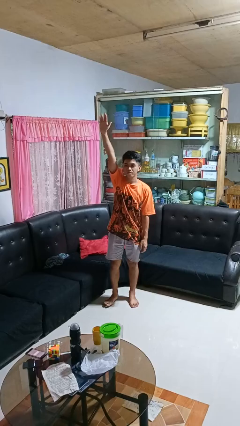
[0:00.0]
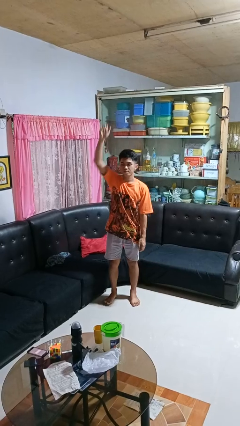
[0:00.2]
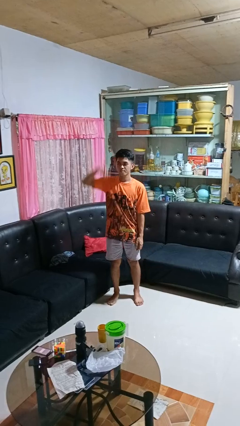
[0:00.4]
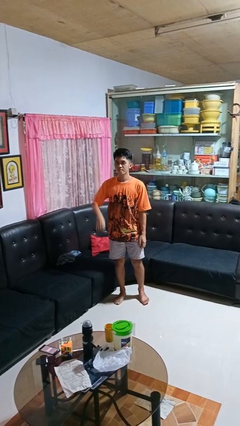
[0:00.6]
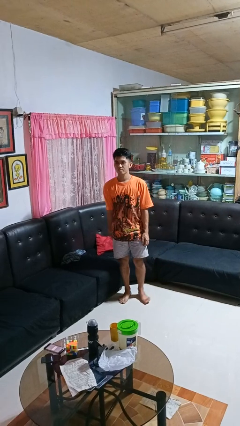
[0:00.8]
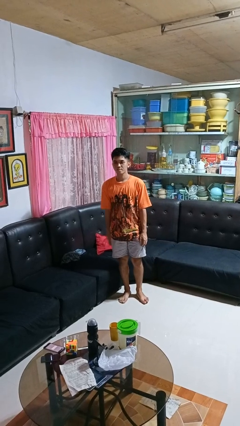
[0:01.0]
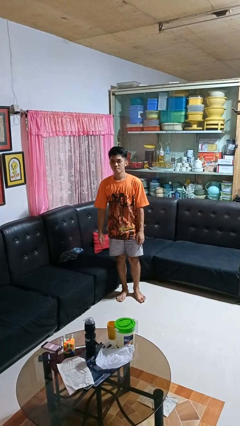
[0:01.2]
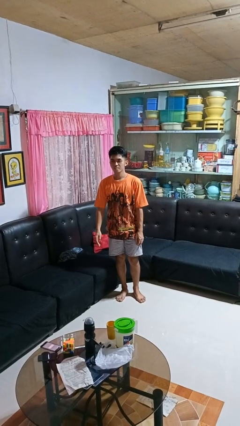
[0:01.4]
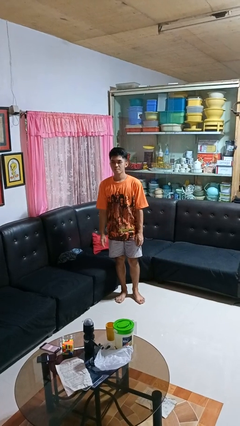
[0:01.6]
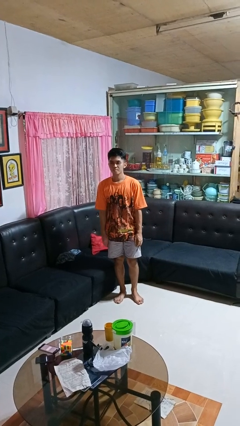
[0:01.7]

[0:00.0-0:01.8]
person gestures lower hand

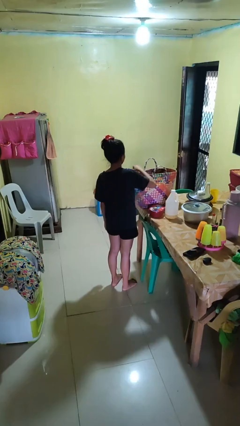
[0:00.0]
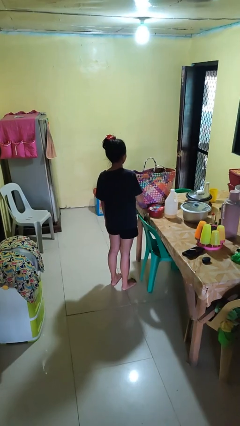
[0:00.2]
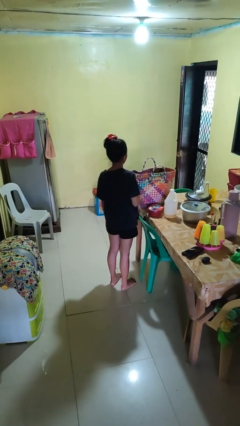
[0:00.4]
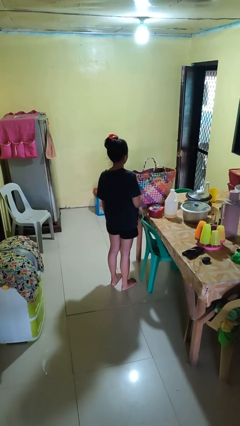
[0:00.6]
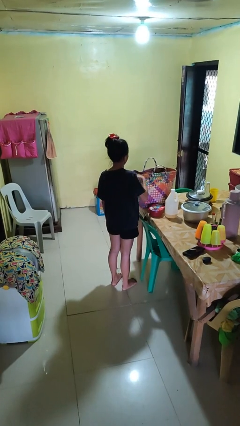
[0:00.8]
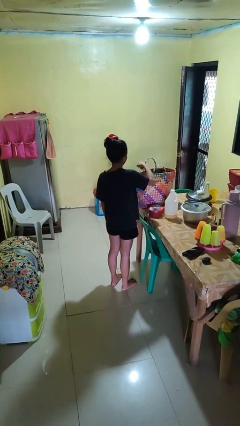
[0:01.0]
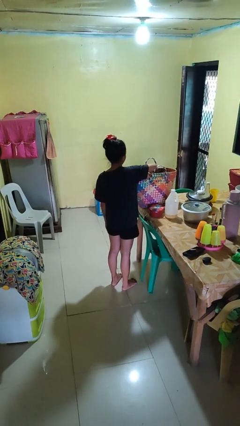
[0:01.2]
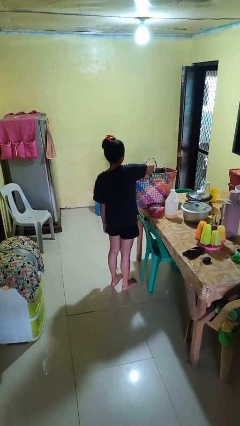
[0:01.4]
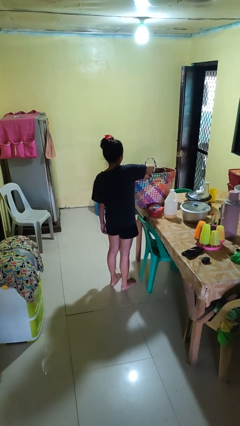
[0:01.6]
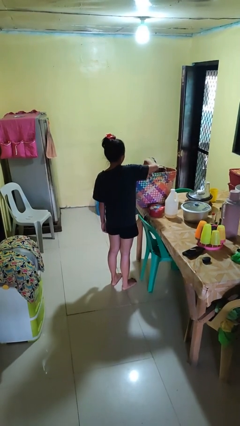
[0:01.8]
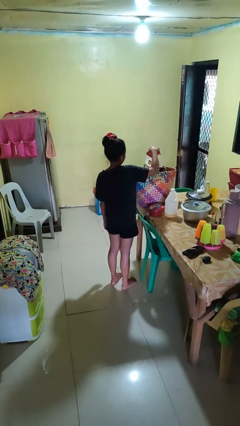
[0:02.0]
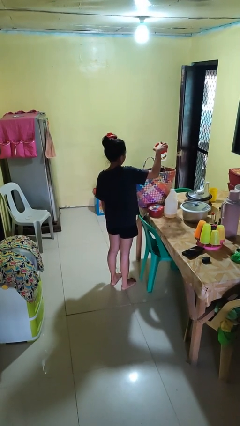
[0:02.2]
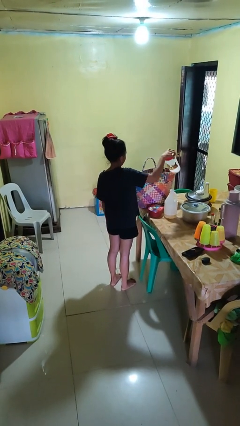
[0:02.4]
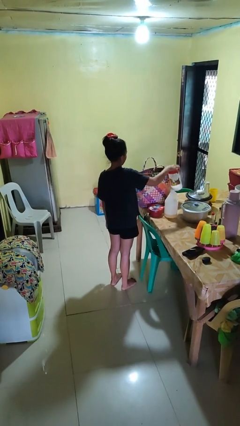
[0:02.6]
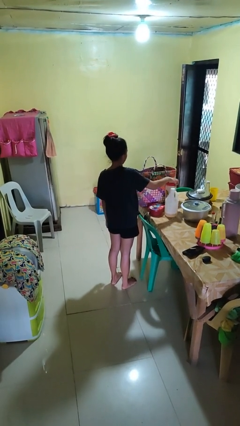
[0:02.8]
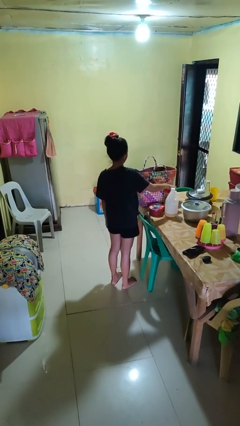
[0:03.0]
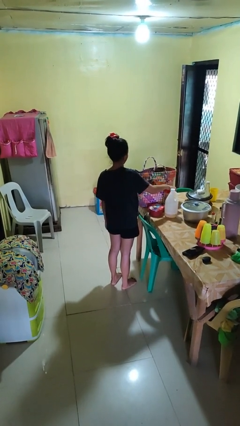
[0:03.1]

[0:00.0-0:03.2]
person takes object from basket

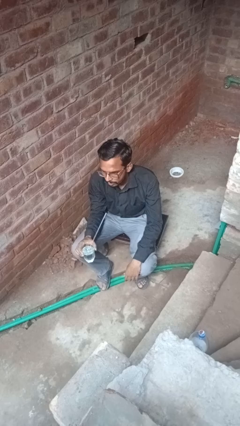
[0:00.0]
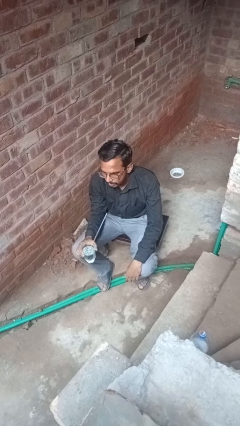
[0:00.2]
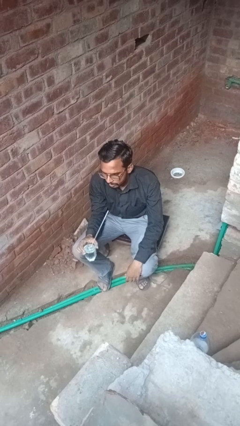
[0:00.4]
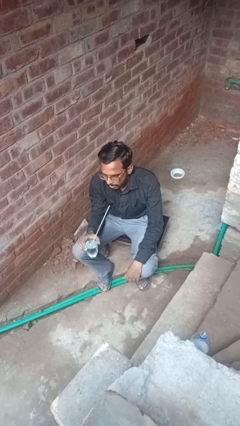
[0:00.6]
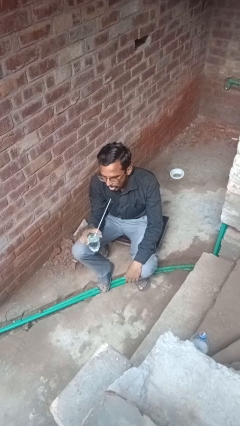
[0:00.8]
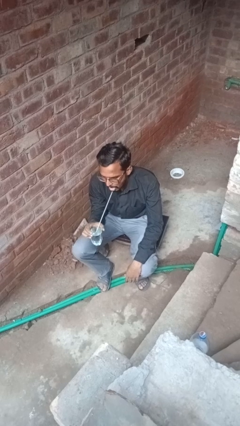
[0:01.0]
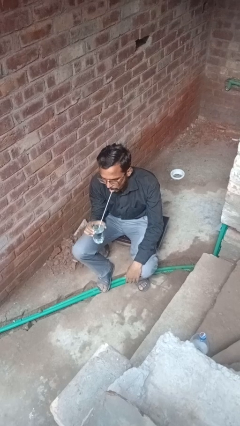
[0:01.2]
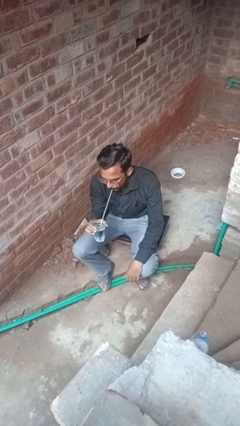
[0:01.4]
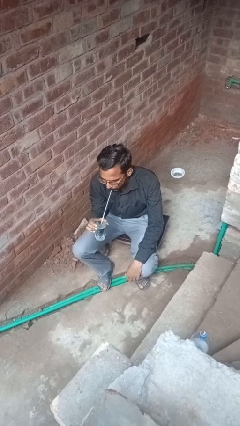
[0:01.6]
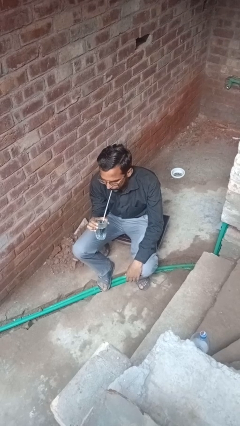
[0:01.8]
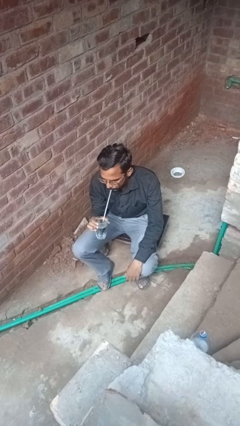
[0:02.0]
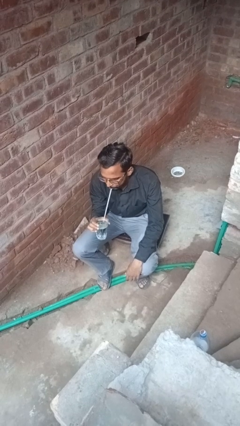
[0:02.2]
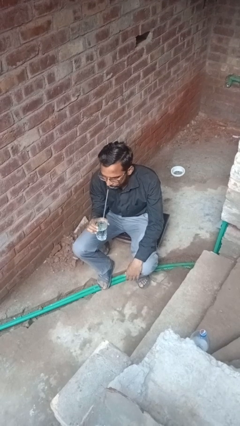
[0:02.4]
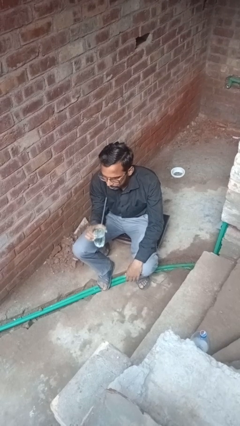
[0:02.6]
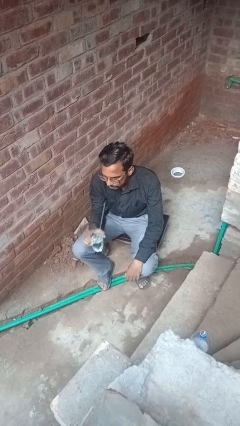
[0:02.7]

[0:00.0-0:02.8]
person drinks from straw

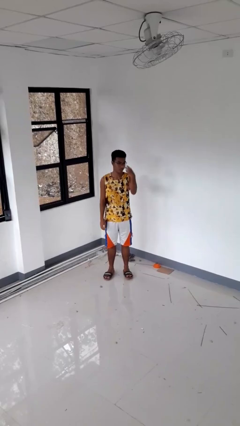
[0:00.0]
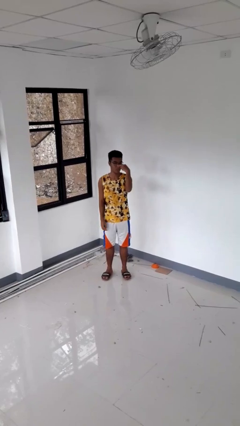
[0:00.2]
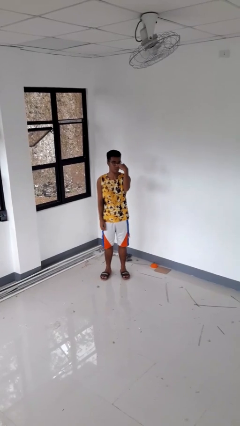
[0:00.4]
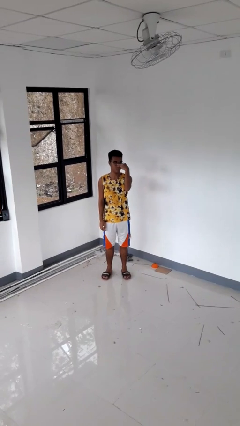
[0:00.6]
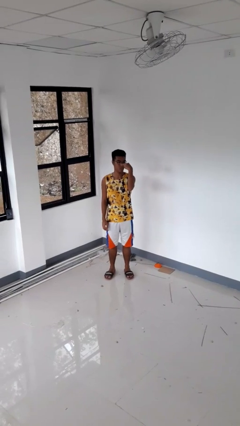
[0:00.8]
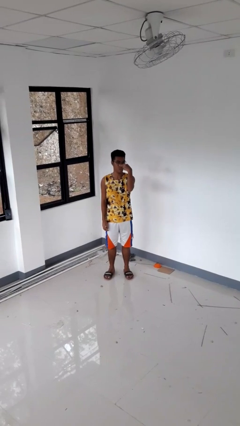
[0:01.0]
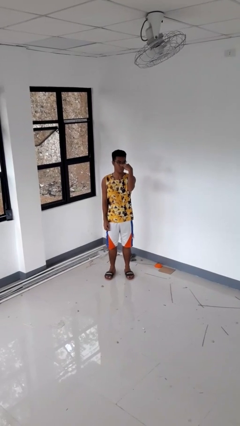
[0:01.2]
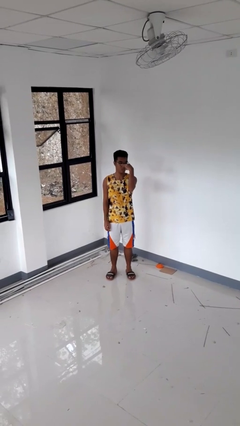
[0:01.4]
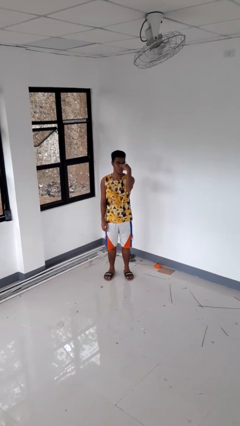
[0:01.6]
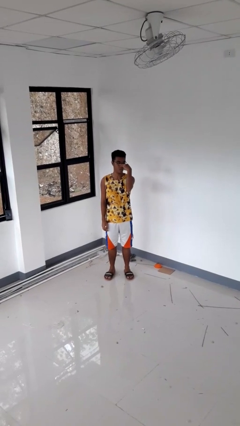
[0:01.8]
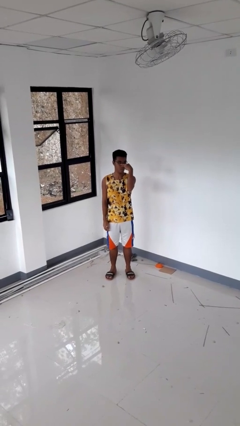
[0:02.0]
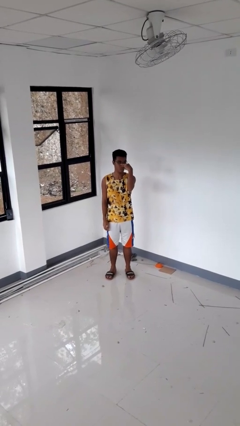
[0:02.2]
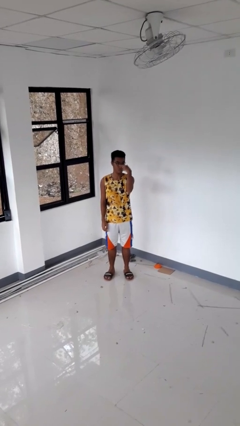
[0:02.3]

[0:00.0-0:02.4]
person gestures watch closely

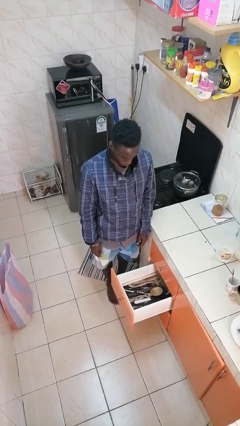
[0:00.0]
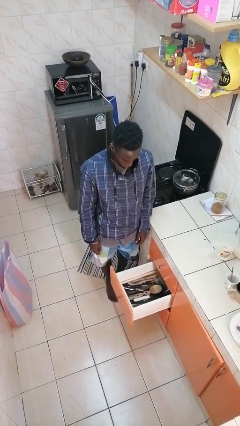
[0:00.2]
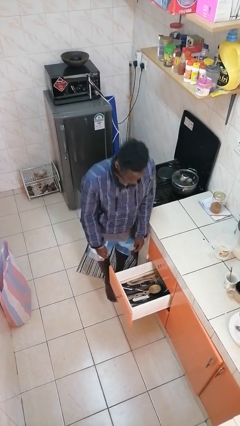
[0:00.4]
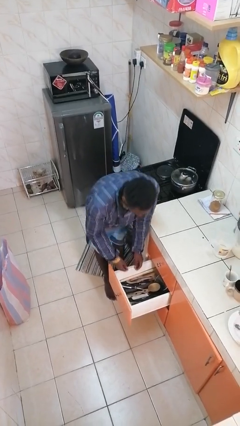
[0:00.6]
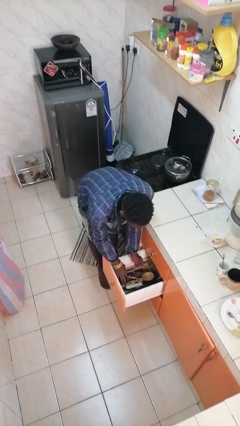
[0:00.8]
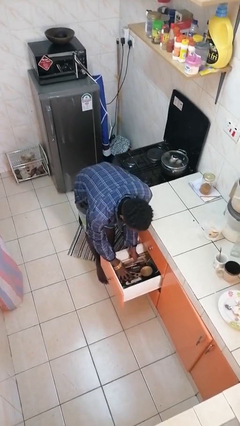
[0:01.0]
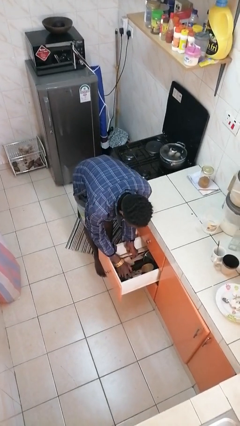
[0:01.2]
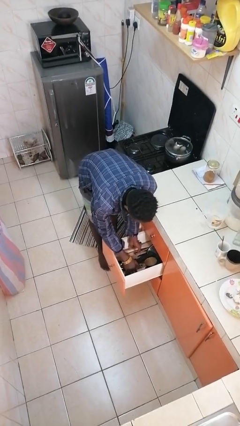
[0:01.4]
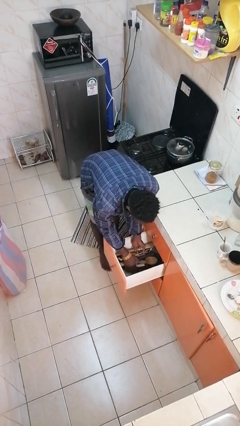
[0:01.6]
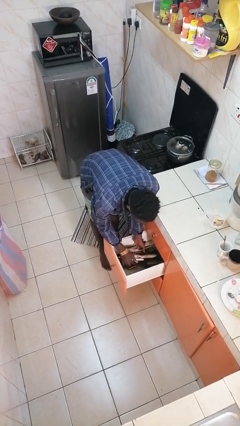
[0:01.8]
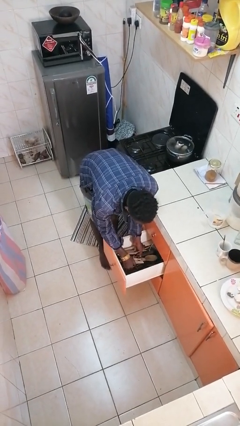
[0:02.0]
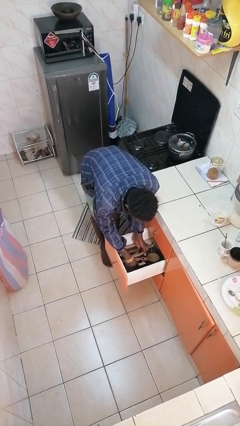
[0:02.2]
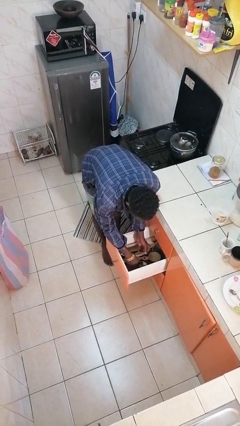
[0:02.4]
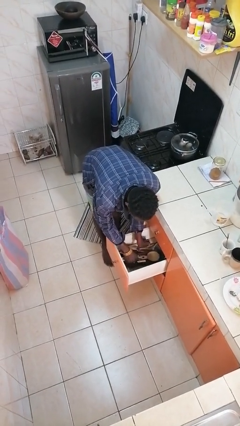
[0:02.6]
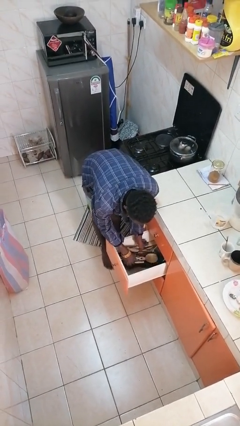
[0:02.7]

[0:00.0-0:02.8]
person searches in kitchen drawer

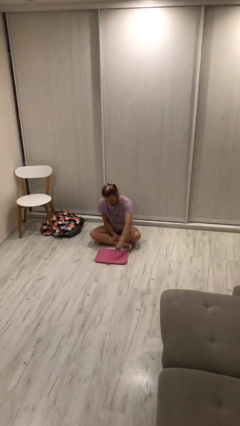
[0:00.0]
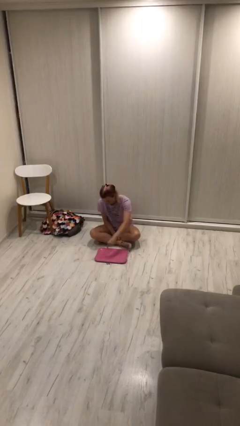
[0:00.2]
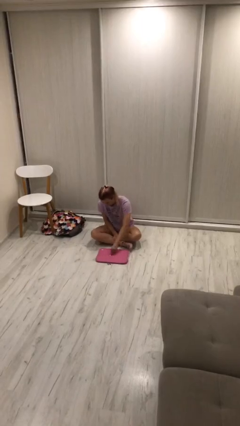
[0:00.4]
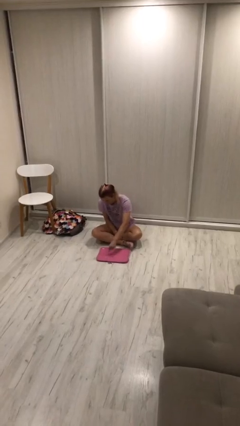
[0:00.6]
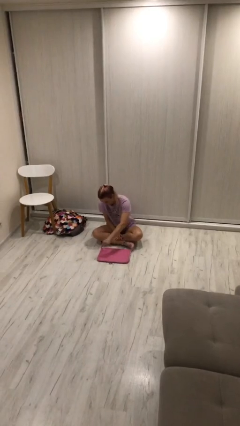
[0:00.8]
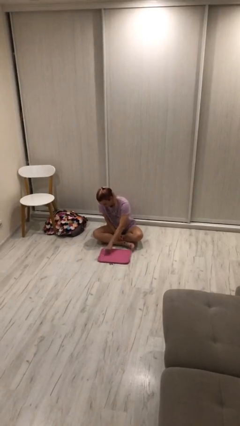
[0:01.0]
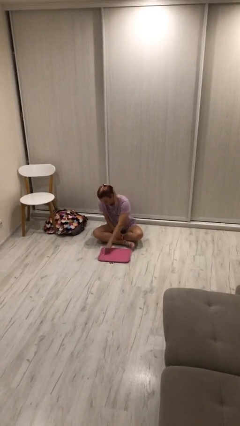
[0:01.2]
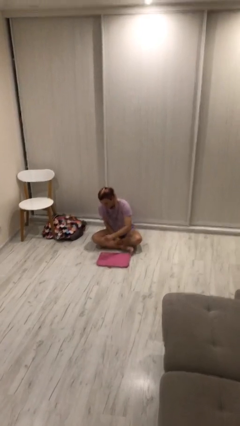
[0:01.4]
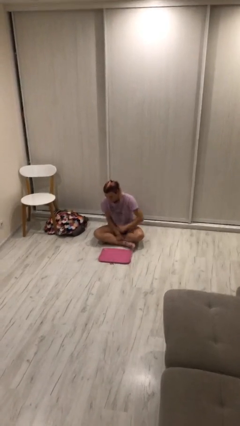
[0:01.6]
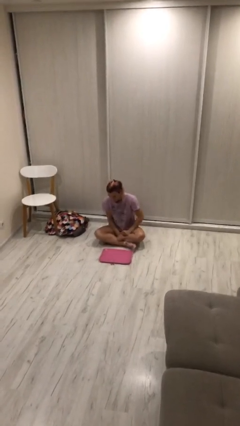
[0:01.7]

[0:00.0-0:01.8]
person taps object with finger

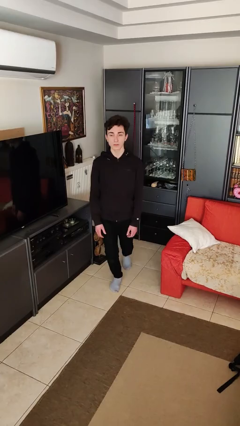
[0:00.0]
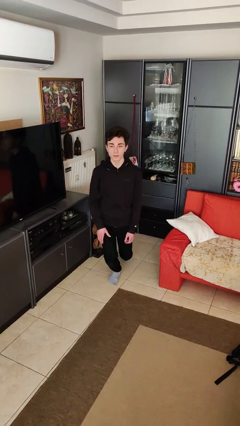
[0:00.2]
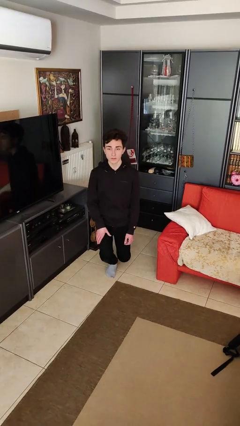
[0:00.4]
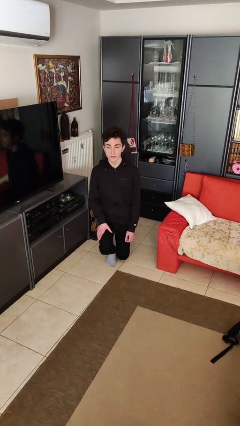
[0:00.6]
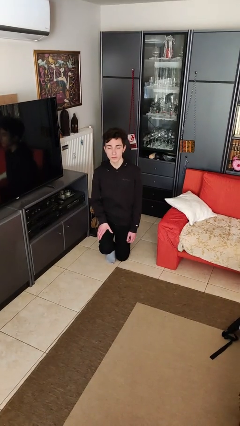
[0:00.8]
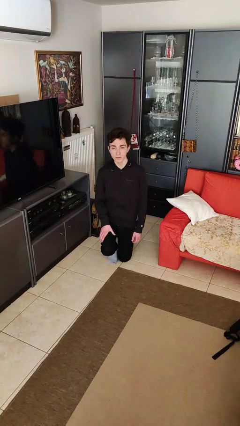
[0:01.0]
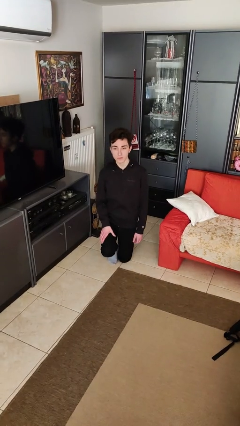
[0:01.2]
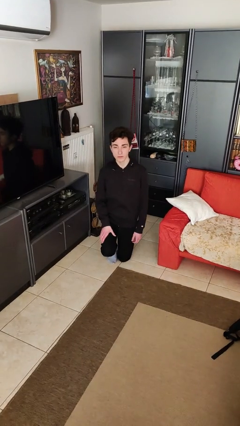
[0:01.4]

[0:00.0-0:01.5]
person kneels

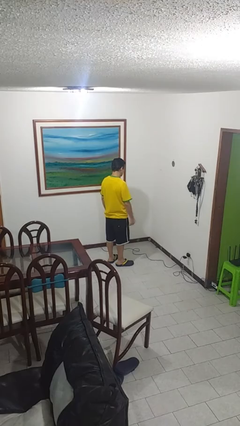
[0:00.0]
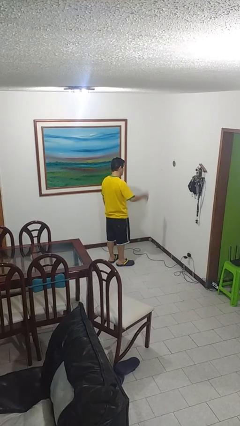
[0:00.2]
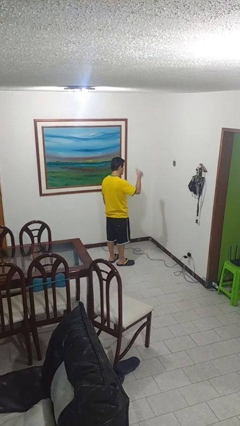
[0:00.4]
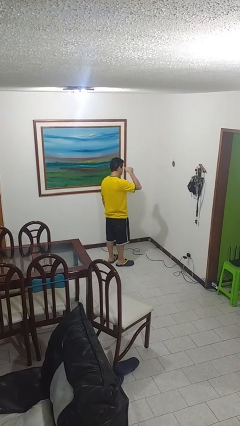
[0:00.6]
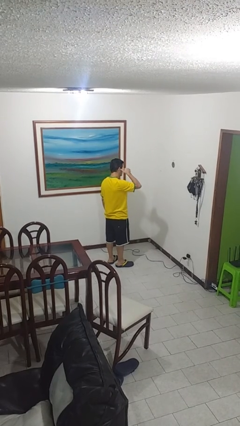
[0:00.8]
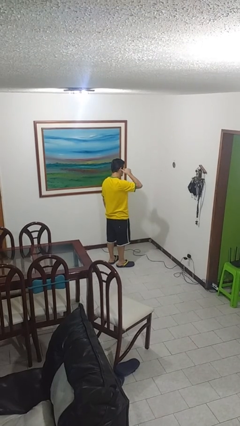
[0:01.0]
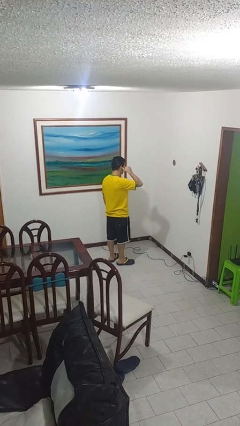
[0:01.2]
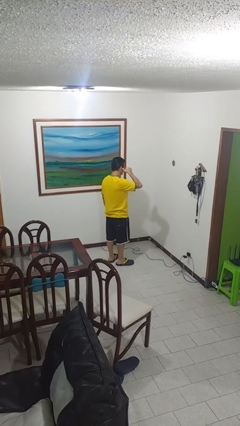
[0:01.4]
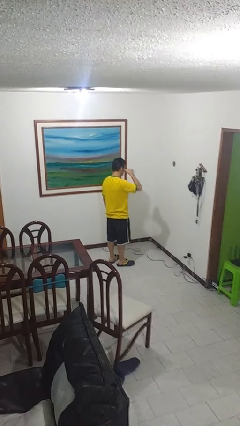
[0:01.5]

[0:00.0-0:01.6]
person gestures call me
